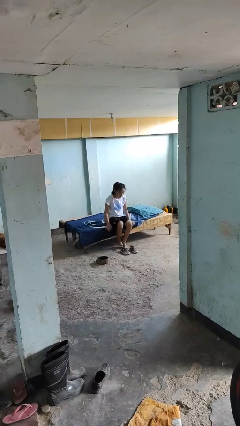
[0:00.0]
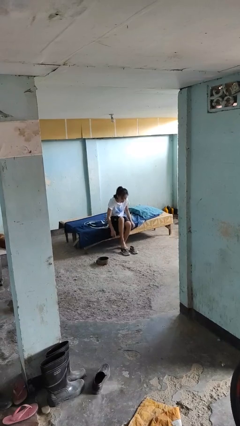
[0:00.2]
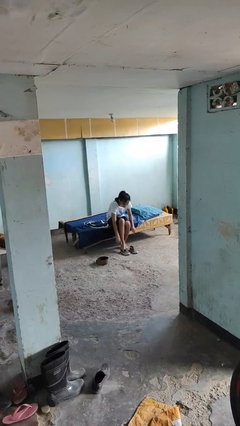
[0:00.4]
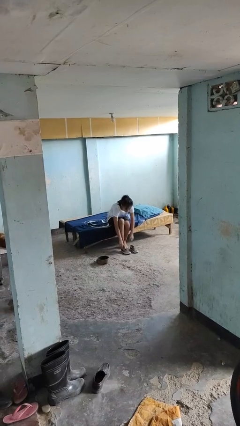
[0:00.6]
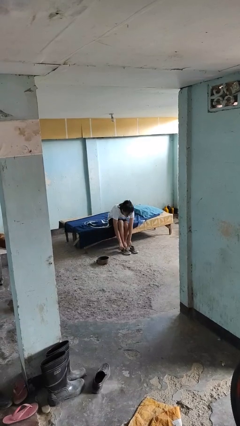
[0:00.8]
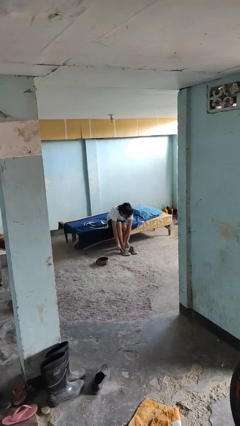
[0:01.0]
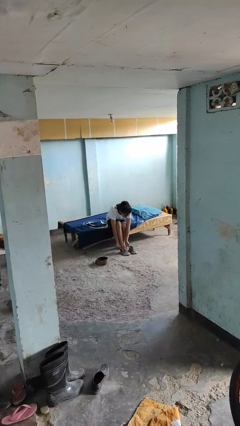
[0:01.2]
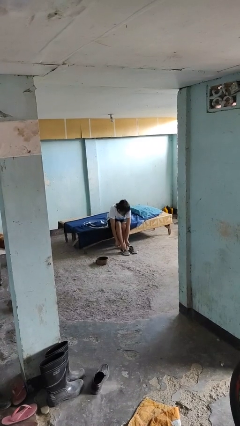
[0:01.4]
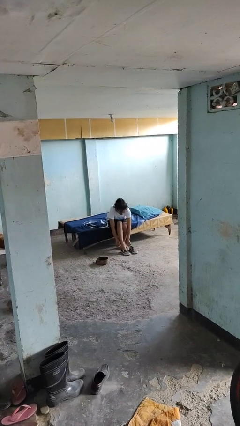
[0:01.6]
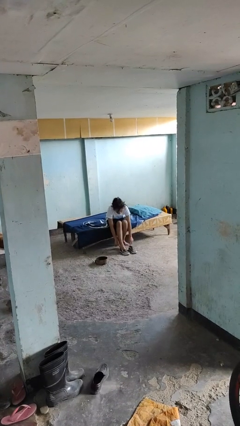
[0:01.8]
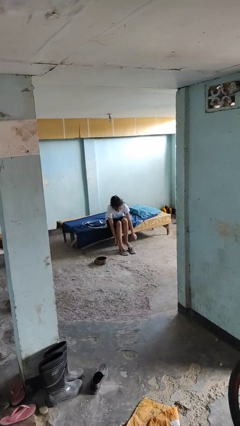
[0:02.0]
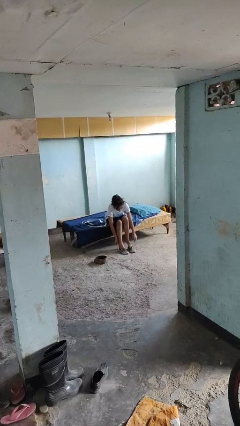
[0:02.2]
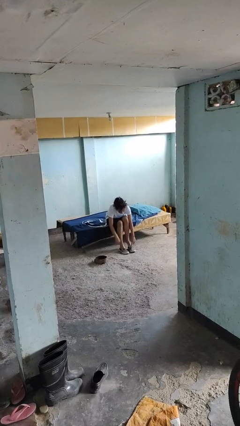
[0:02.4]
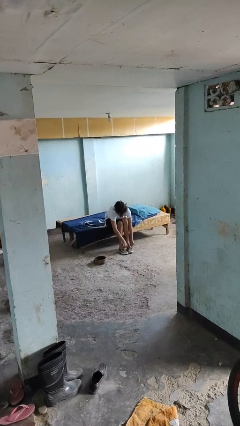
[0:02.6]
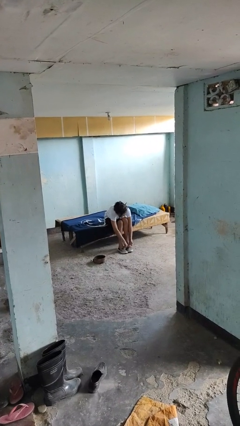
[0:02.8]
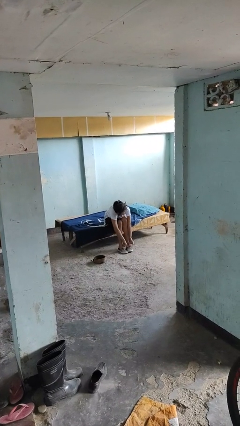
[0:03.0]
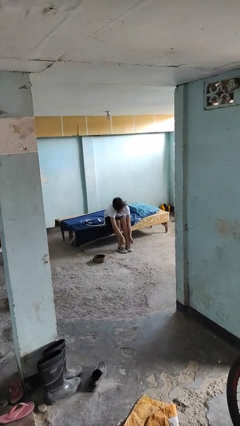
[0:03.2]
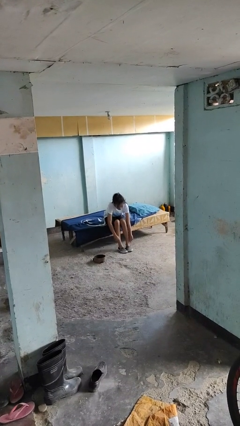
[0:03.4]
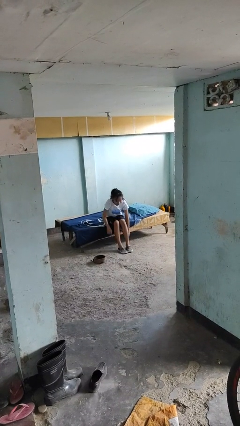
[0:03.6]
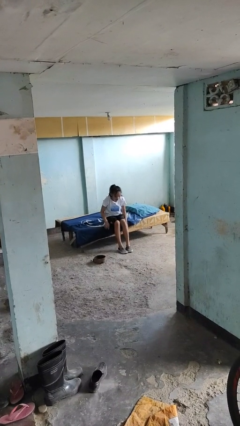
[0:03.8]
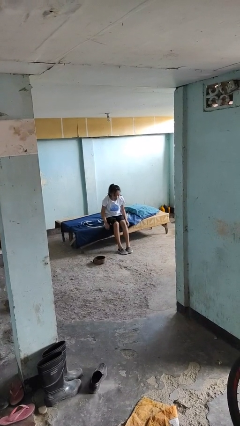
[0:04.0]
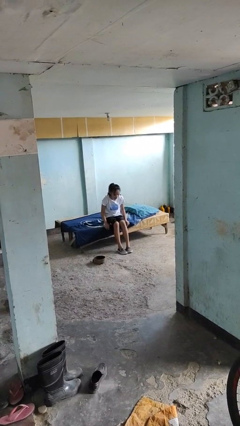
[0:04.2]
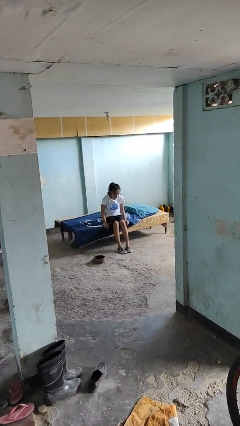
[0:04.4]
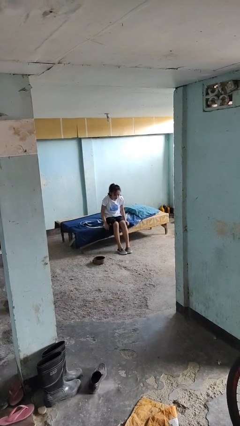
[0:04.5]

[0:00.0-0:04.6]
person puts on shoes

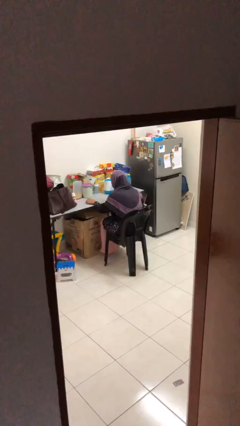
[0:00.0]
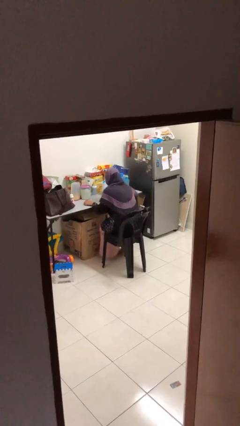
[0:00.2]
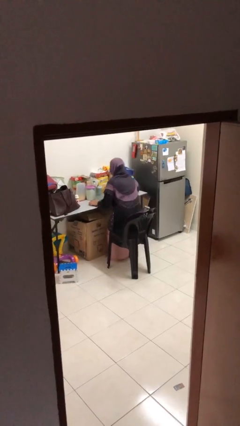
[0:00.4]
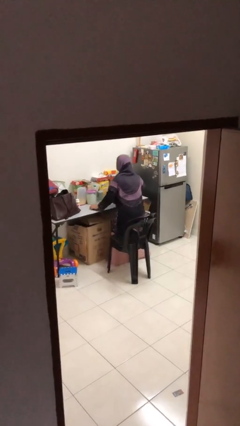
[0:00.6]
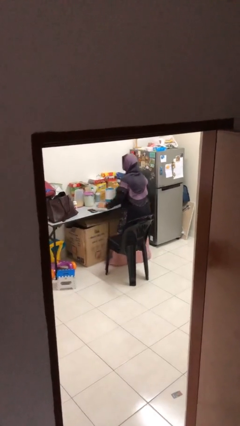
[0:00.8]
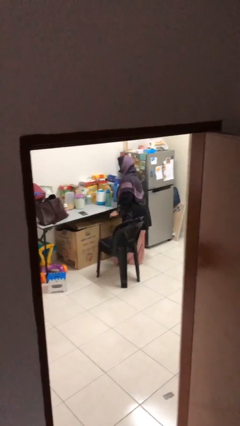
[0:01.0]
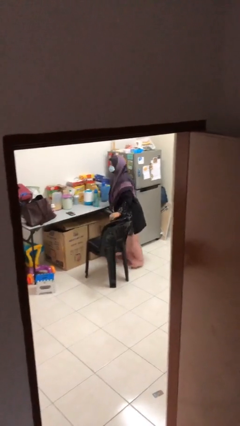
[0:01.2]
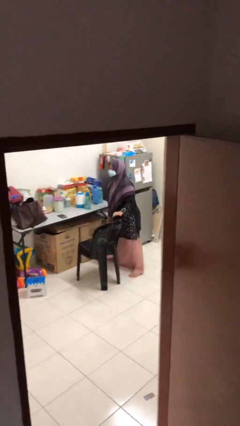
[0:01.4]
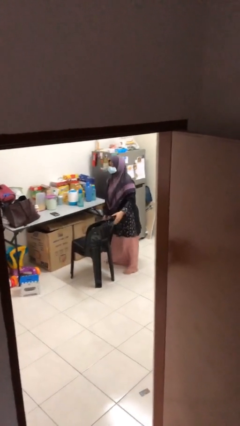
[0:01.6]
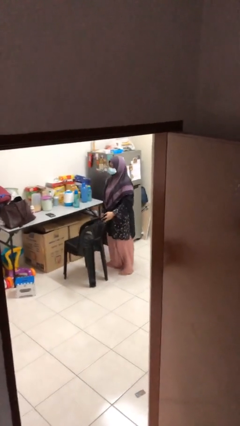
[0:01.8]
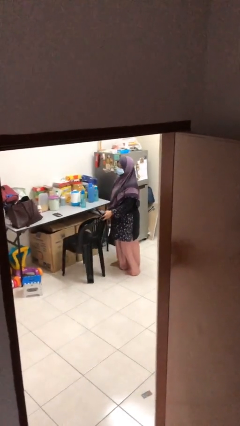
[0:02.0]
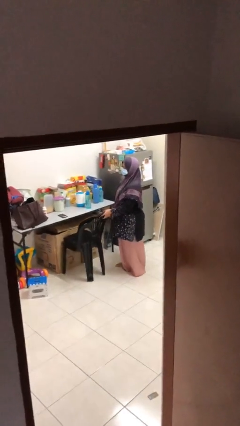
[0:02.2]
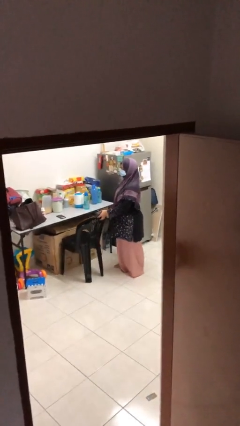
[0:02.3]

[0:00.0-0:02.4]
person stands up

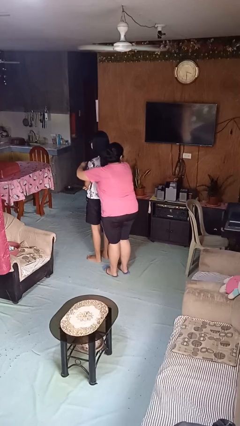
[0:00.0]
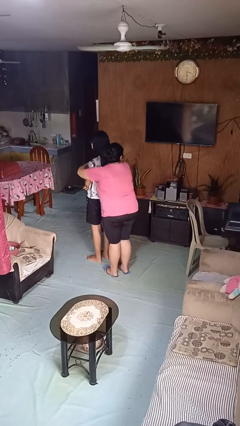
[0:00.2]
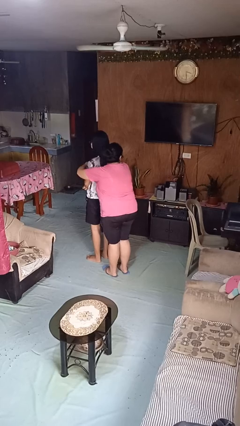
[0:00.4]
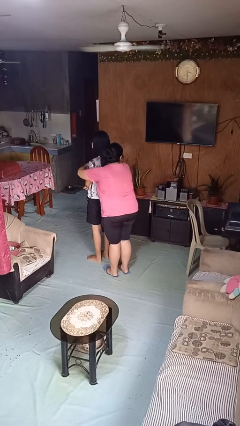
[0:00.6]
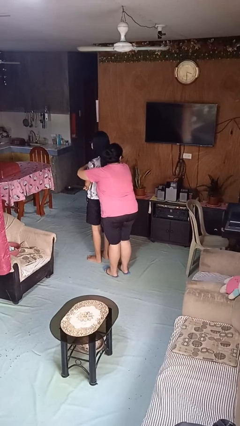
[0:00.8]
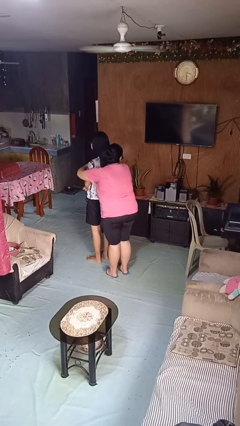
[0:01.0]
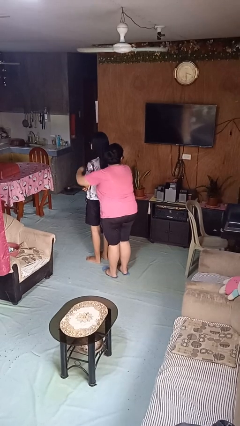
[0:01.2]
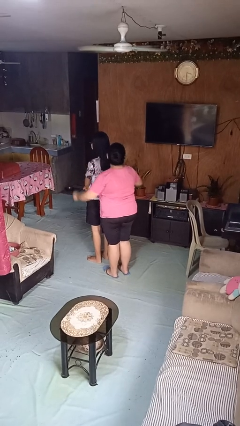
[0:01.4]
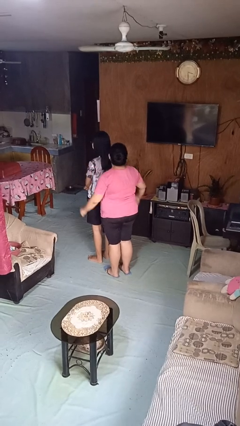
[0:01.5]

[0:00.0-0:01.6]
person hugs person from behind

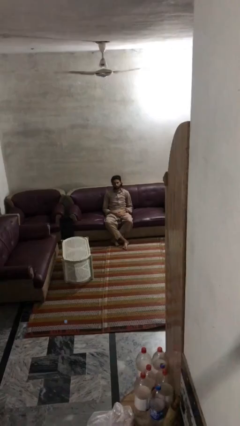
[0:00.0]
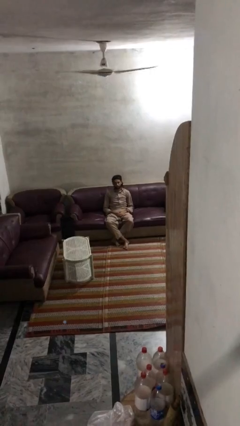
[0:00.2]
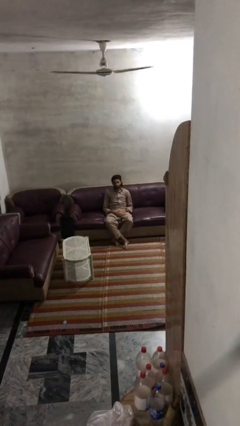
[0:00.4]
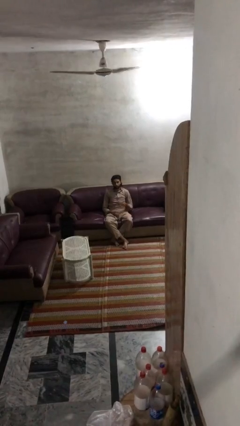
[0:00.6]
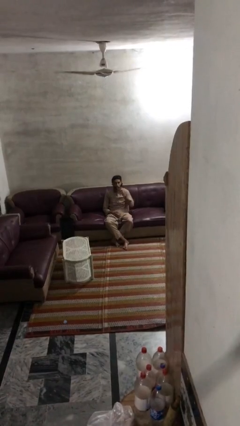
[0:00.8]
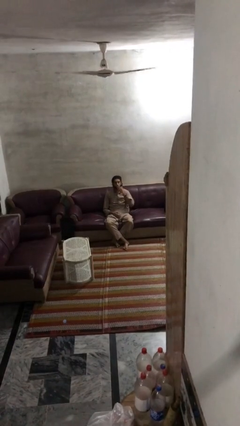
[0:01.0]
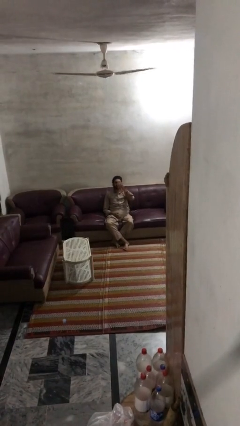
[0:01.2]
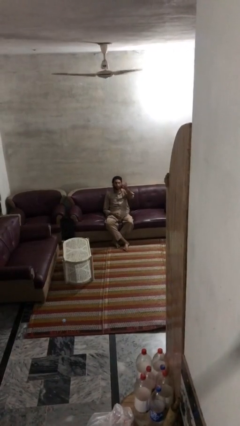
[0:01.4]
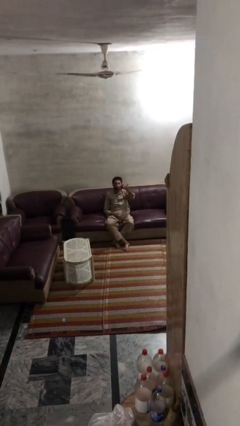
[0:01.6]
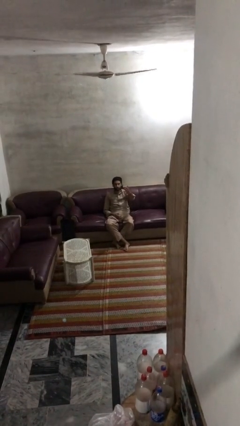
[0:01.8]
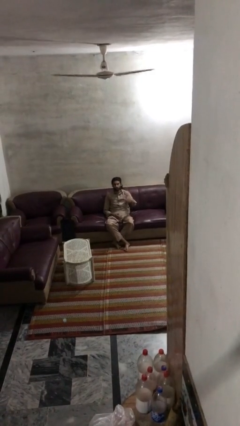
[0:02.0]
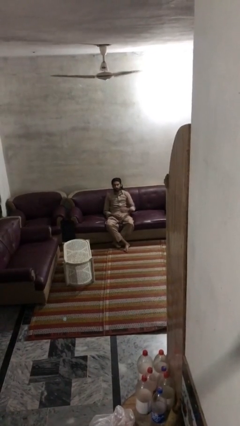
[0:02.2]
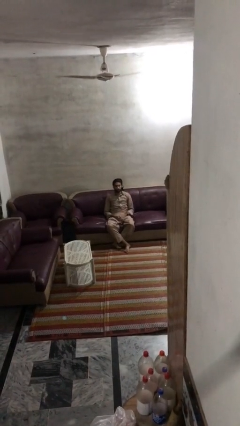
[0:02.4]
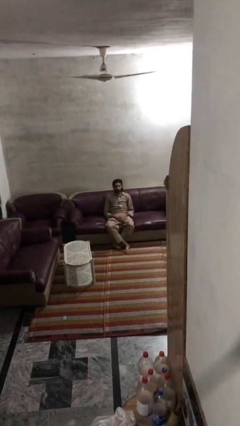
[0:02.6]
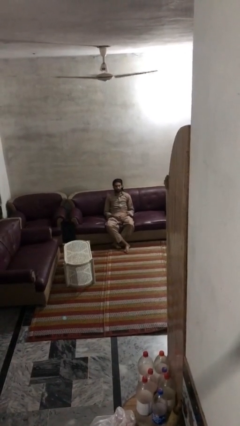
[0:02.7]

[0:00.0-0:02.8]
person gestures blow kiss

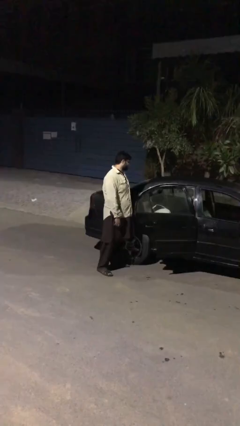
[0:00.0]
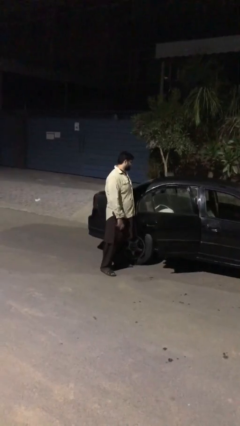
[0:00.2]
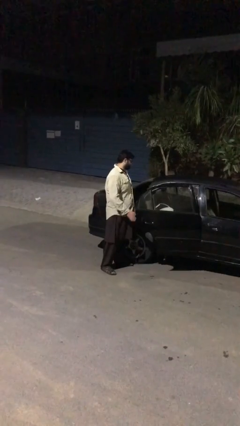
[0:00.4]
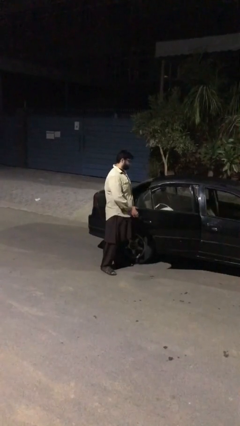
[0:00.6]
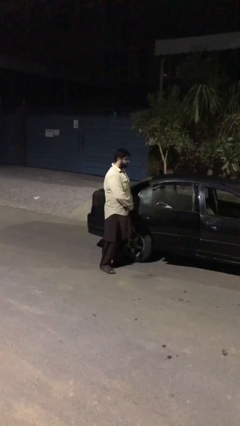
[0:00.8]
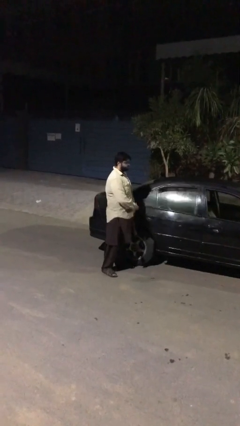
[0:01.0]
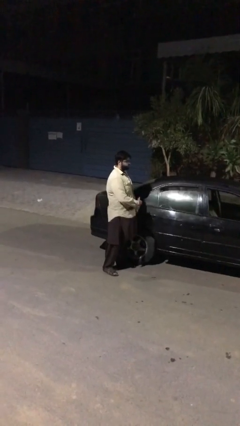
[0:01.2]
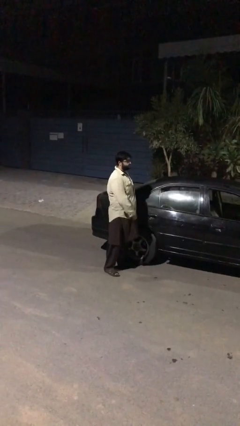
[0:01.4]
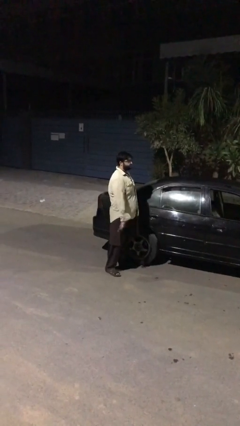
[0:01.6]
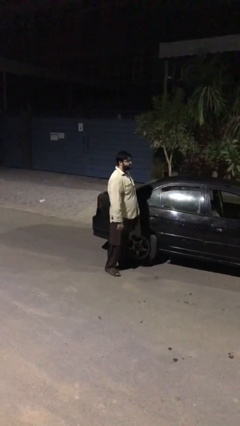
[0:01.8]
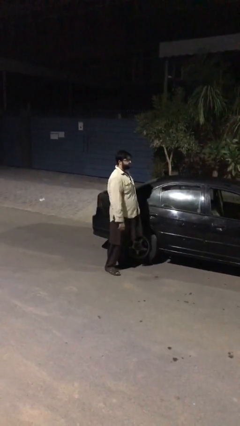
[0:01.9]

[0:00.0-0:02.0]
person closes car door

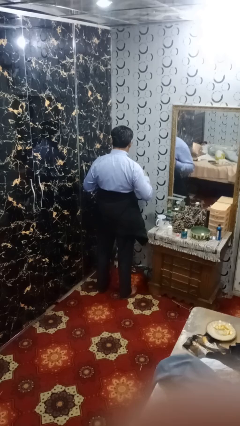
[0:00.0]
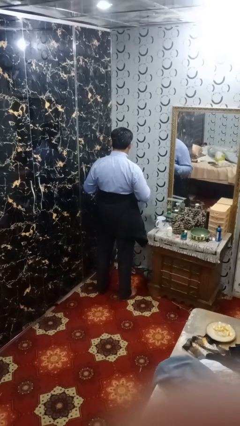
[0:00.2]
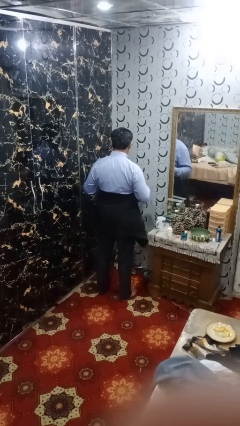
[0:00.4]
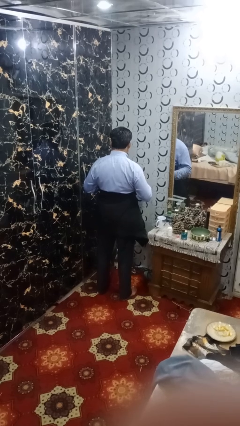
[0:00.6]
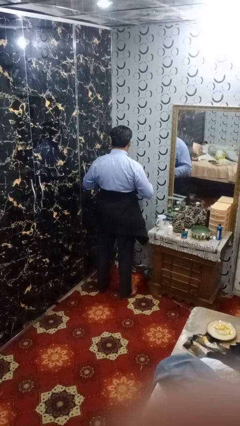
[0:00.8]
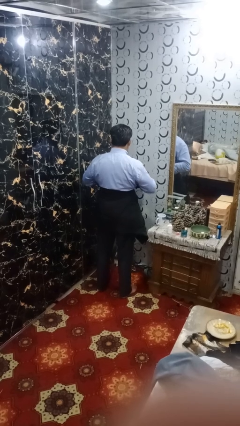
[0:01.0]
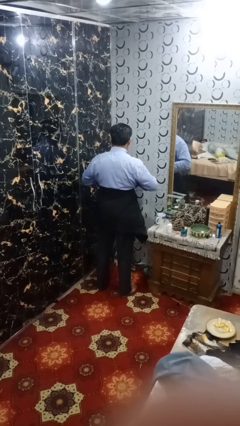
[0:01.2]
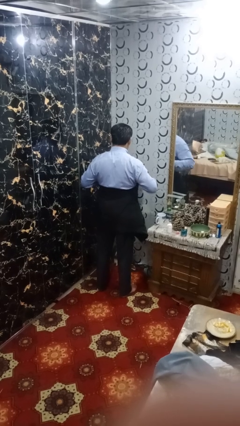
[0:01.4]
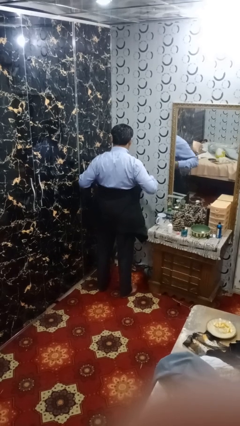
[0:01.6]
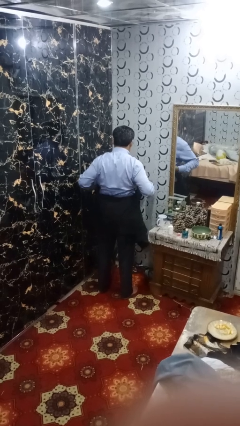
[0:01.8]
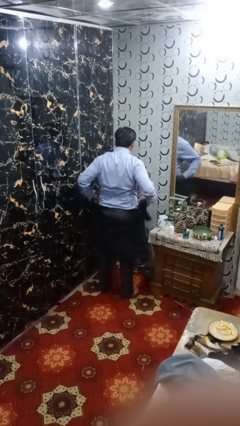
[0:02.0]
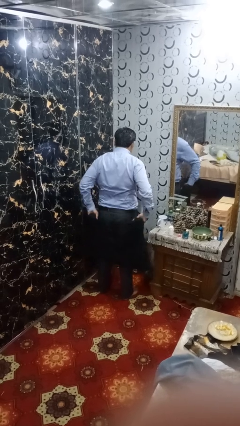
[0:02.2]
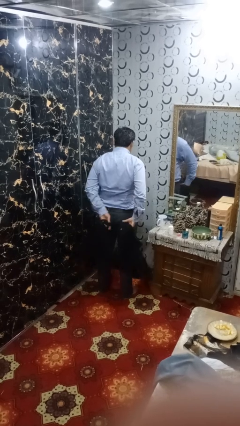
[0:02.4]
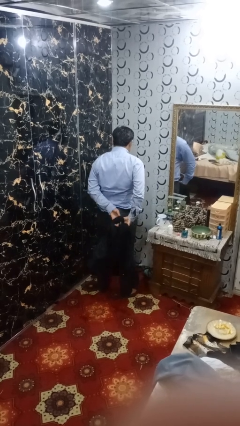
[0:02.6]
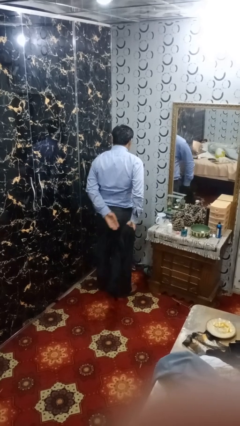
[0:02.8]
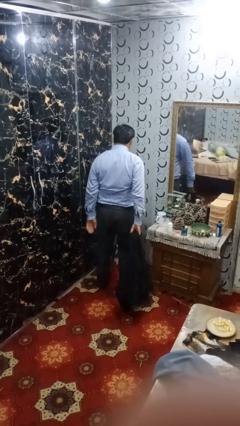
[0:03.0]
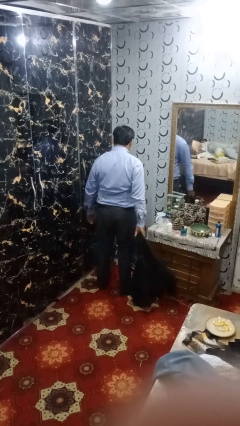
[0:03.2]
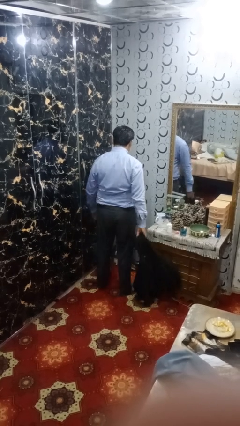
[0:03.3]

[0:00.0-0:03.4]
person unties jacket around waist

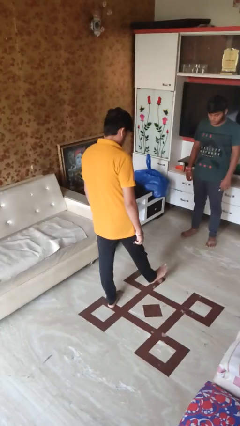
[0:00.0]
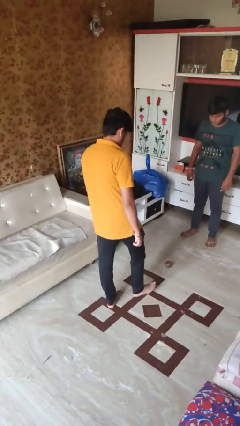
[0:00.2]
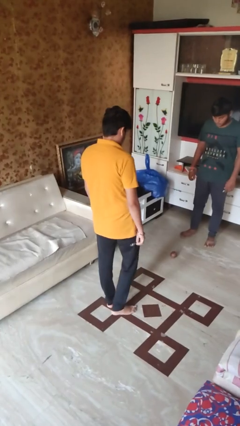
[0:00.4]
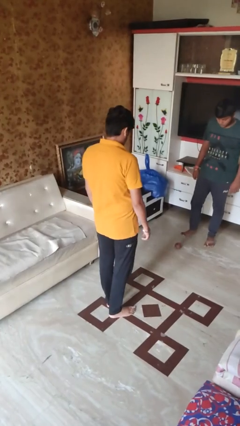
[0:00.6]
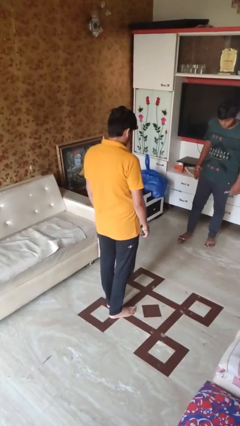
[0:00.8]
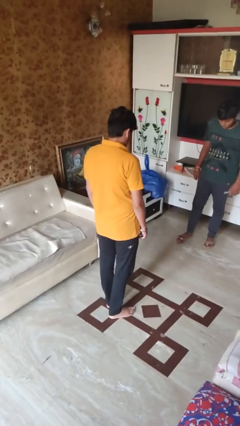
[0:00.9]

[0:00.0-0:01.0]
person kicks object to person
